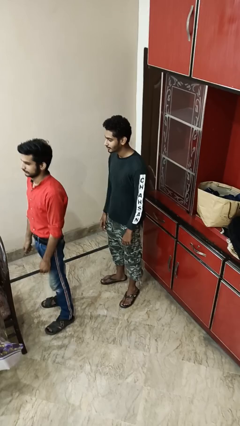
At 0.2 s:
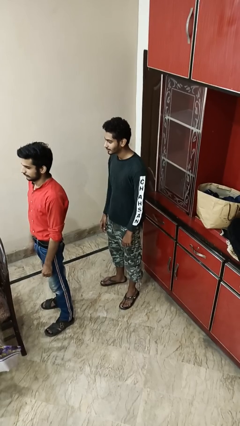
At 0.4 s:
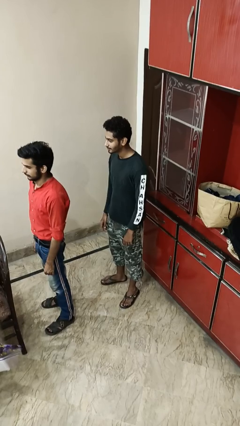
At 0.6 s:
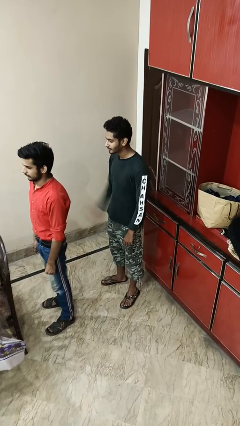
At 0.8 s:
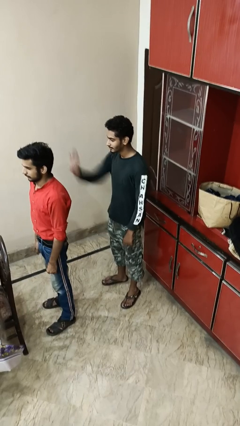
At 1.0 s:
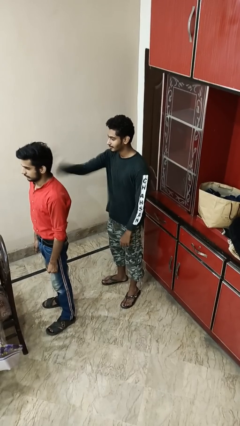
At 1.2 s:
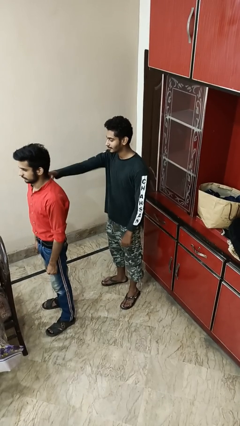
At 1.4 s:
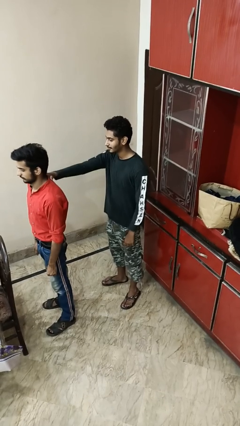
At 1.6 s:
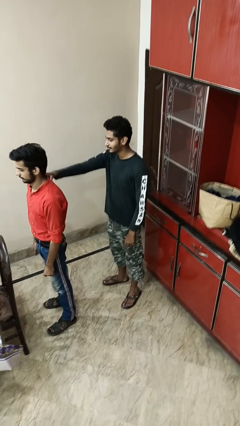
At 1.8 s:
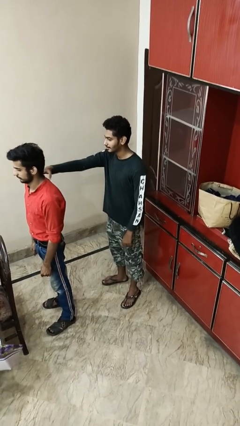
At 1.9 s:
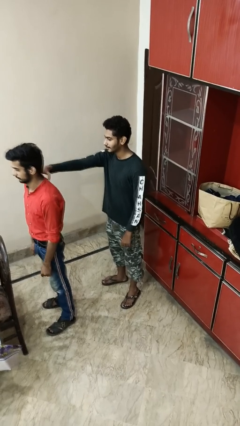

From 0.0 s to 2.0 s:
person grabs person by shoulder

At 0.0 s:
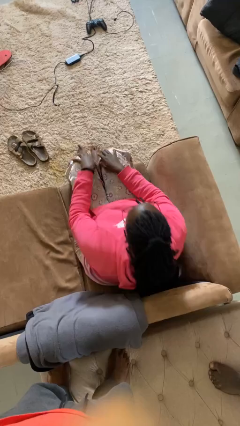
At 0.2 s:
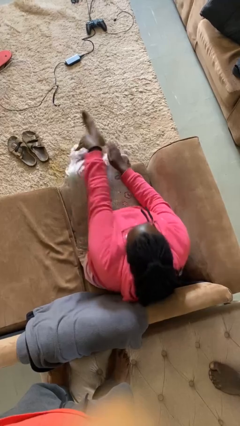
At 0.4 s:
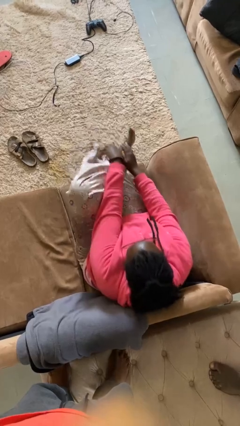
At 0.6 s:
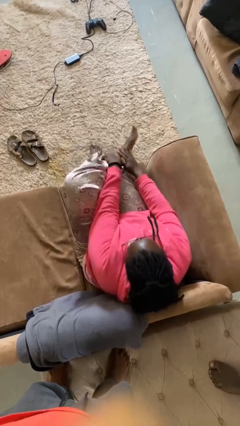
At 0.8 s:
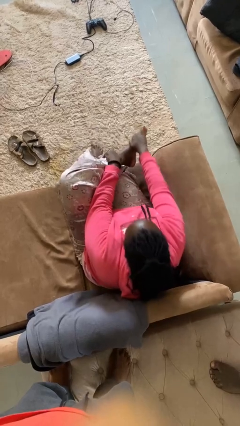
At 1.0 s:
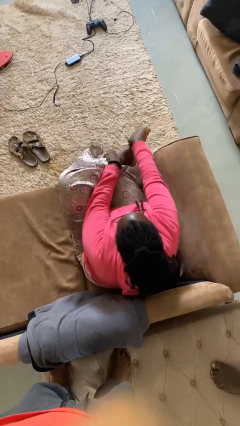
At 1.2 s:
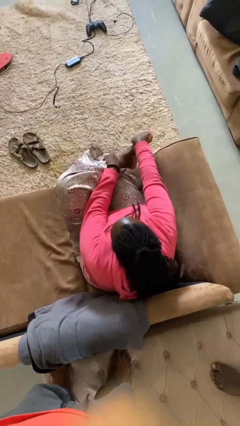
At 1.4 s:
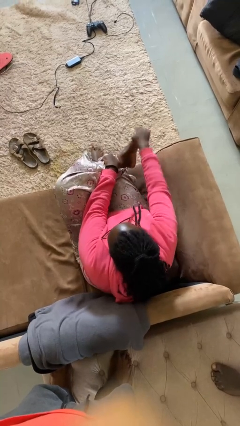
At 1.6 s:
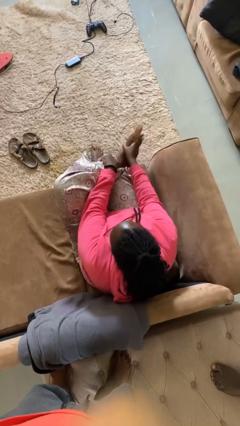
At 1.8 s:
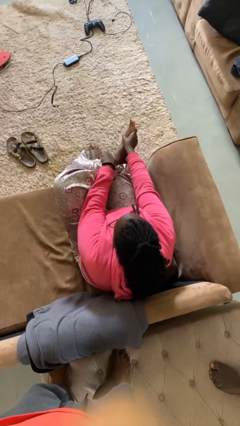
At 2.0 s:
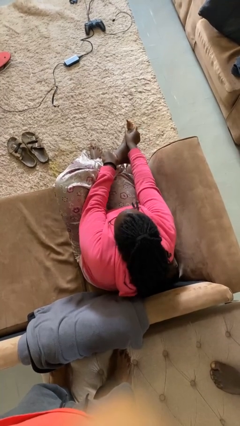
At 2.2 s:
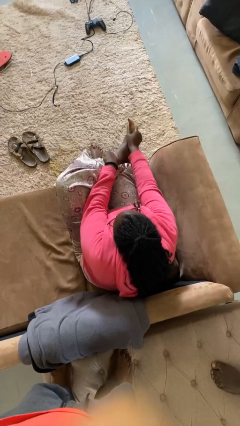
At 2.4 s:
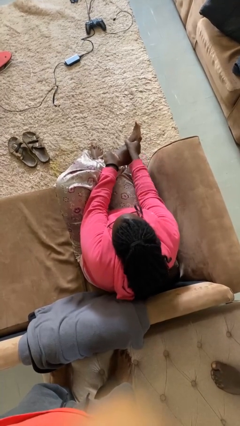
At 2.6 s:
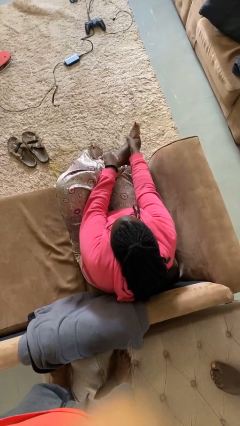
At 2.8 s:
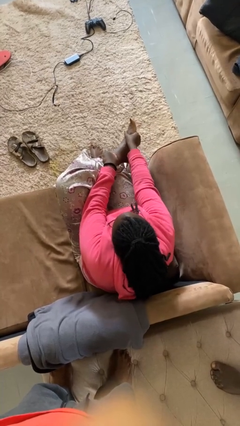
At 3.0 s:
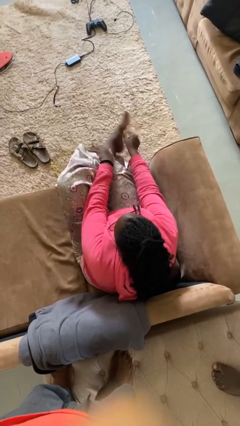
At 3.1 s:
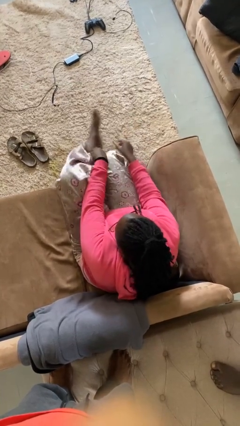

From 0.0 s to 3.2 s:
person rubs foot

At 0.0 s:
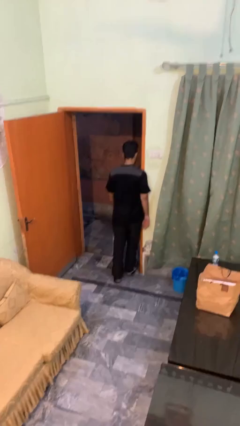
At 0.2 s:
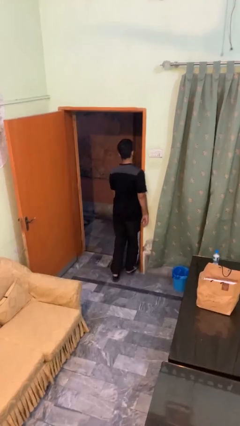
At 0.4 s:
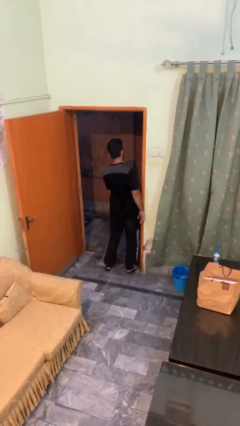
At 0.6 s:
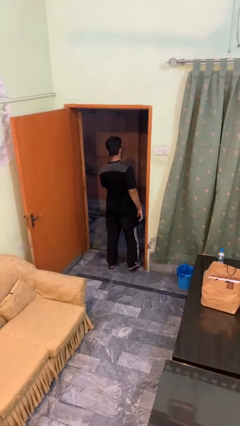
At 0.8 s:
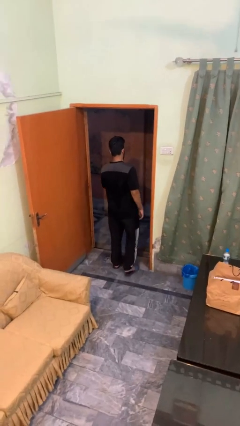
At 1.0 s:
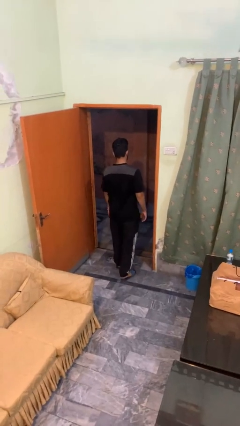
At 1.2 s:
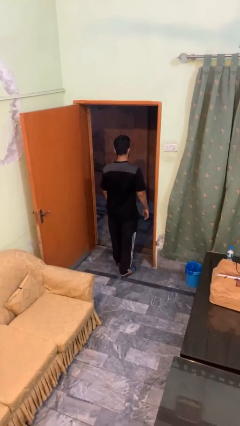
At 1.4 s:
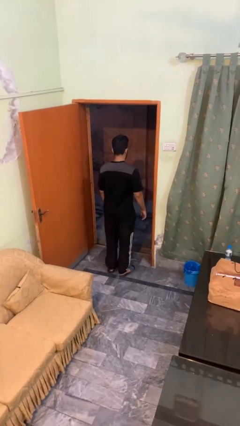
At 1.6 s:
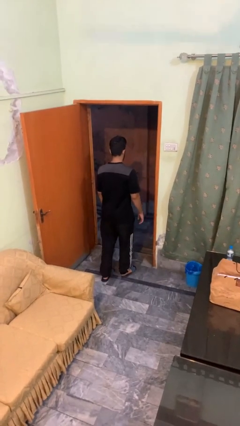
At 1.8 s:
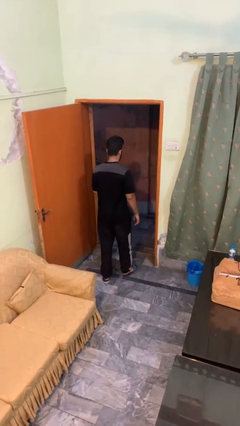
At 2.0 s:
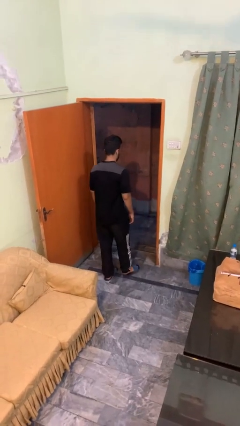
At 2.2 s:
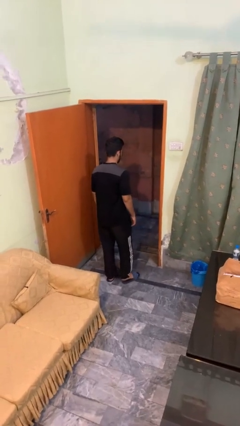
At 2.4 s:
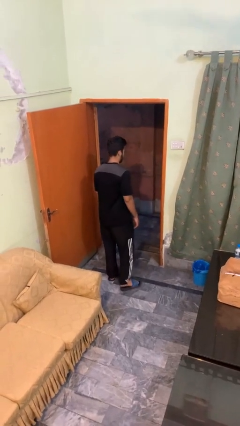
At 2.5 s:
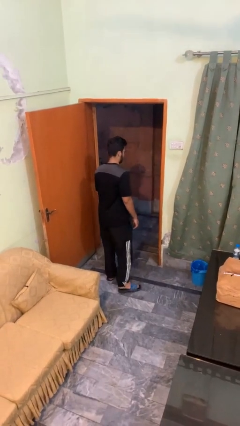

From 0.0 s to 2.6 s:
person bumps into wall

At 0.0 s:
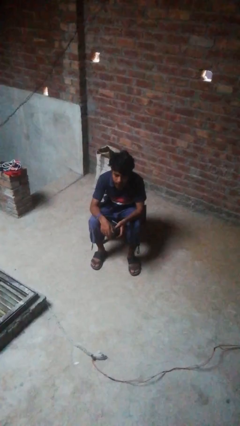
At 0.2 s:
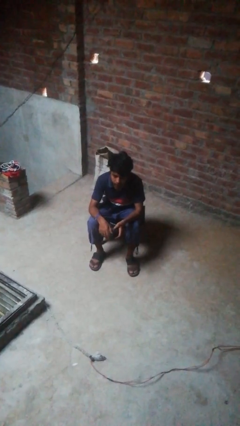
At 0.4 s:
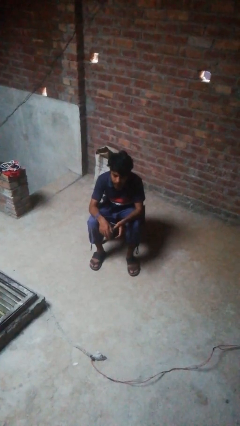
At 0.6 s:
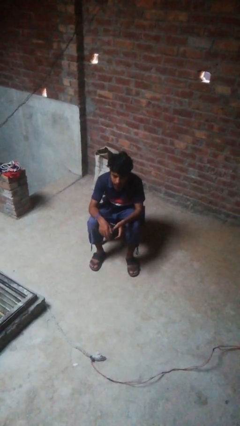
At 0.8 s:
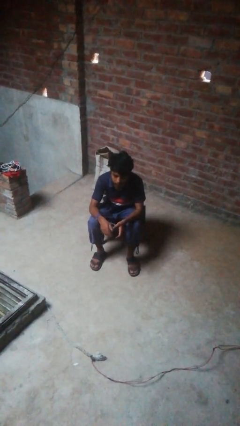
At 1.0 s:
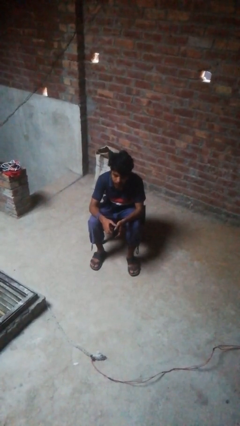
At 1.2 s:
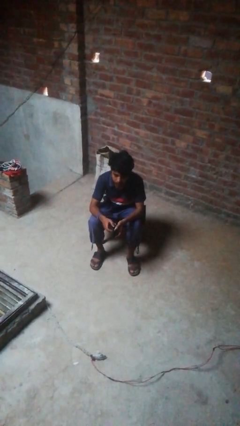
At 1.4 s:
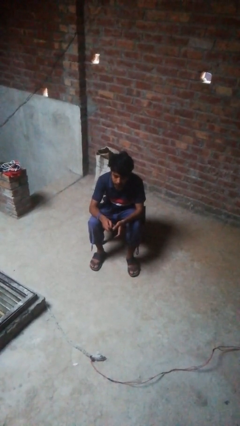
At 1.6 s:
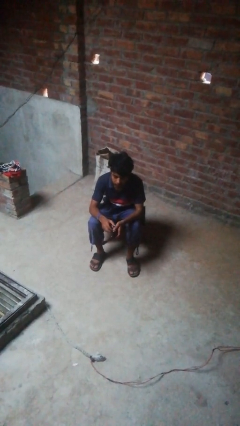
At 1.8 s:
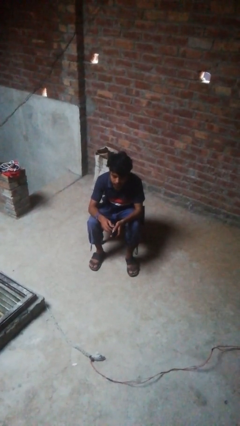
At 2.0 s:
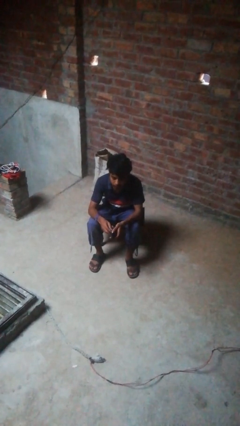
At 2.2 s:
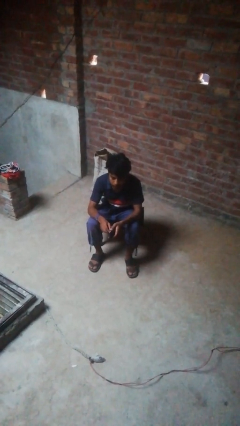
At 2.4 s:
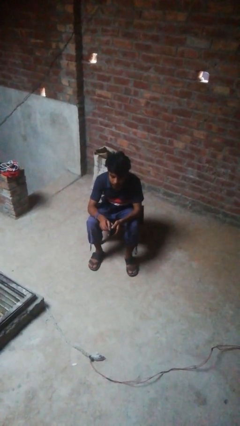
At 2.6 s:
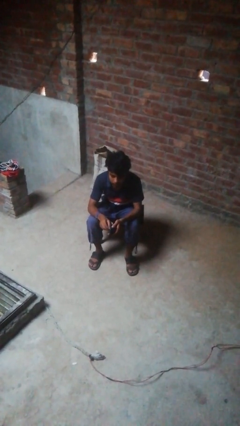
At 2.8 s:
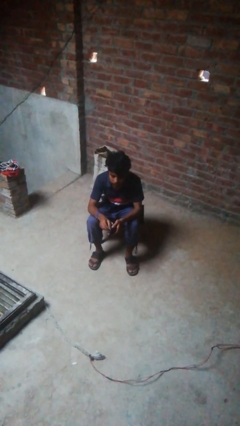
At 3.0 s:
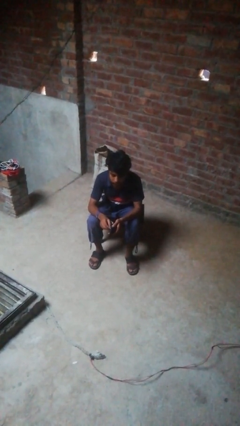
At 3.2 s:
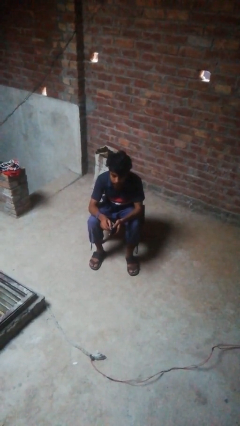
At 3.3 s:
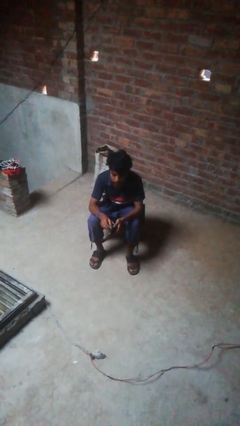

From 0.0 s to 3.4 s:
person searches in purse

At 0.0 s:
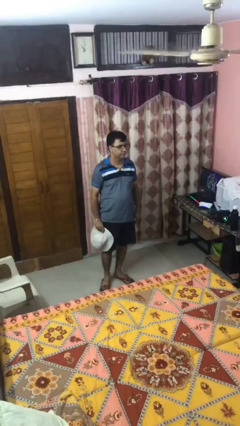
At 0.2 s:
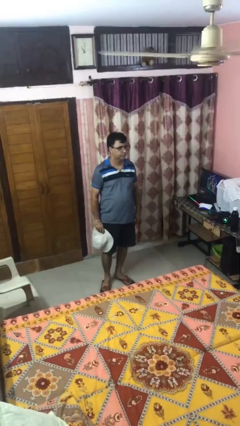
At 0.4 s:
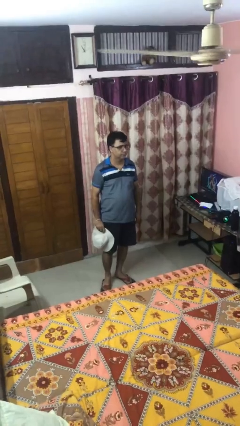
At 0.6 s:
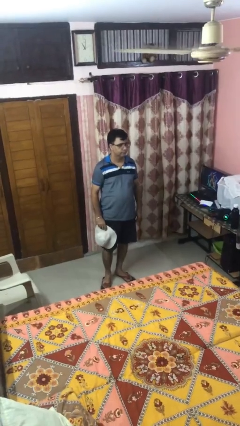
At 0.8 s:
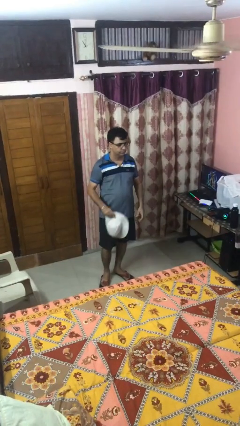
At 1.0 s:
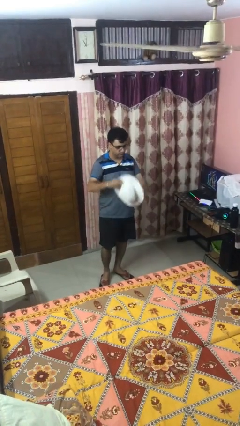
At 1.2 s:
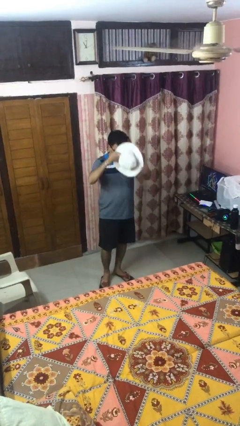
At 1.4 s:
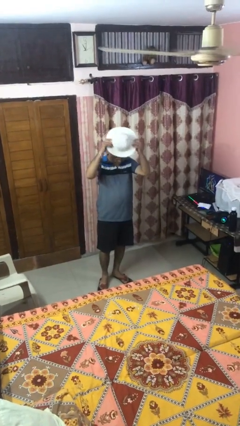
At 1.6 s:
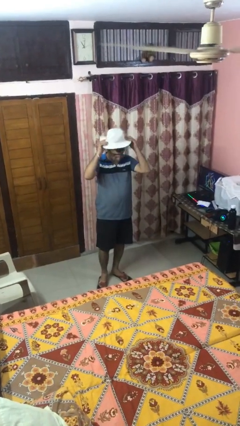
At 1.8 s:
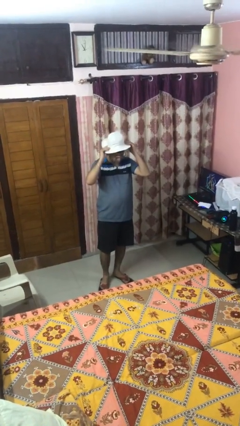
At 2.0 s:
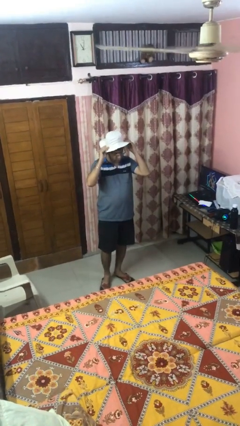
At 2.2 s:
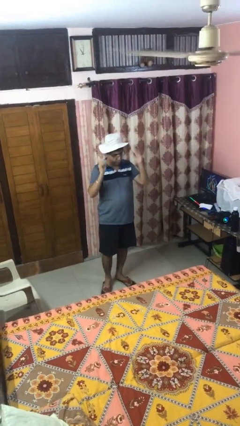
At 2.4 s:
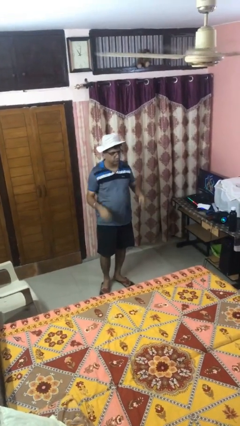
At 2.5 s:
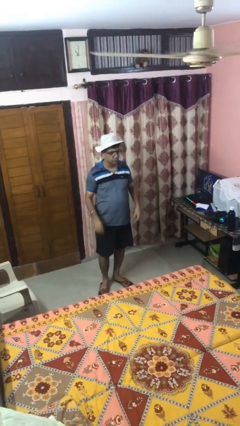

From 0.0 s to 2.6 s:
person puts on hat

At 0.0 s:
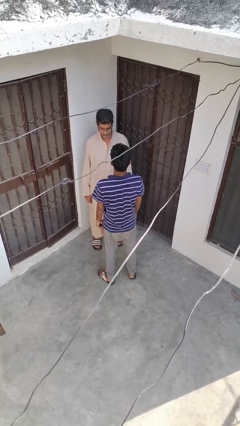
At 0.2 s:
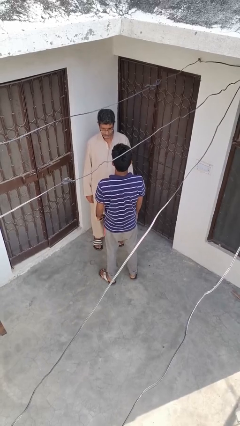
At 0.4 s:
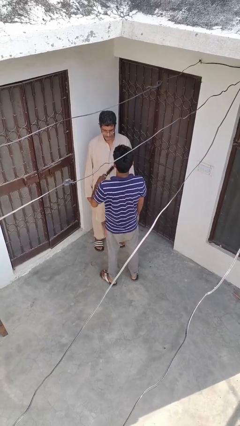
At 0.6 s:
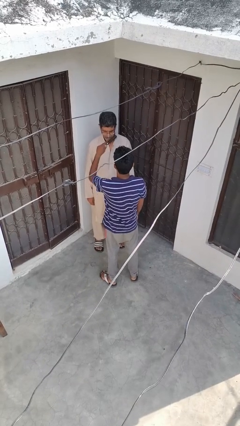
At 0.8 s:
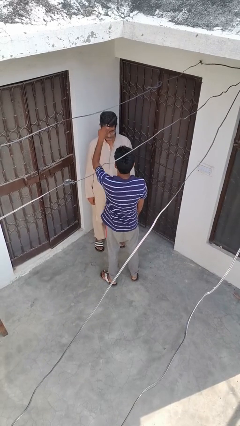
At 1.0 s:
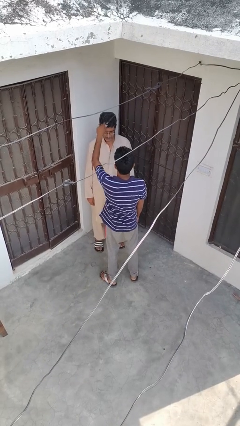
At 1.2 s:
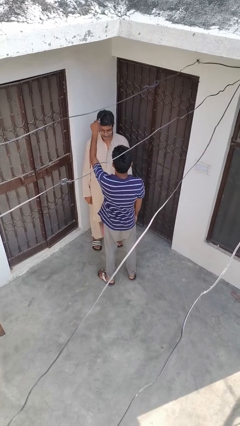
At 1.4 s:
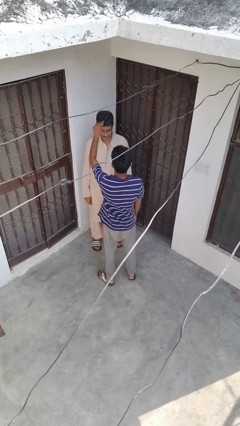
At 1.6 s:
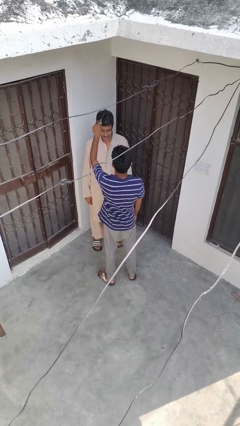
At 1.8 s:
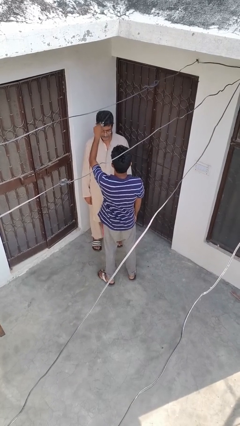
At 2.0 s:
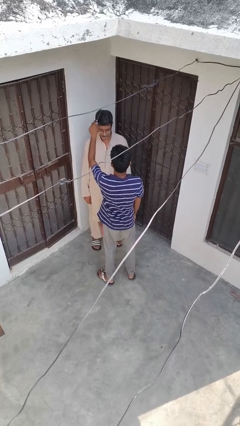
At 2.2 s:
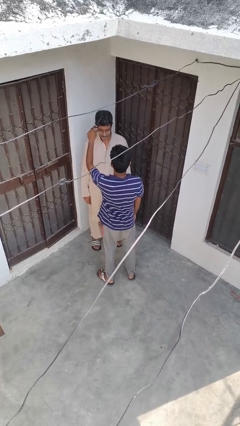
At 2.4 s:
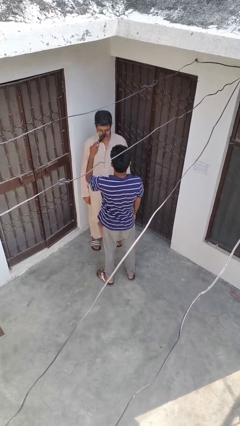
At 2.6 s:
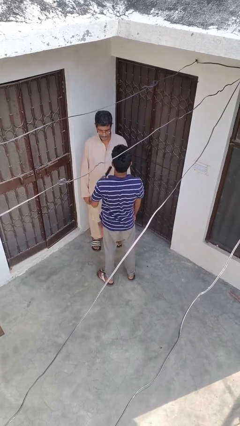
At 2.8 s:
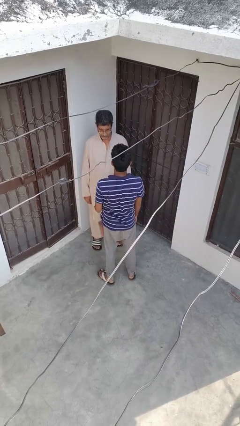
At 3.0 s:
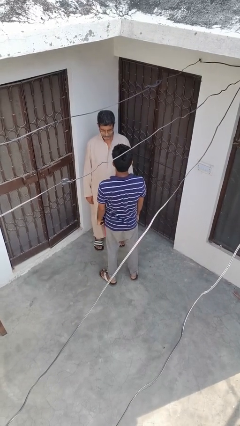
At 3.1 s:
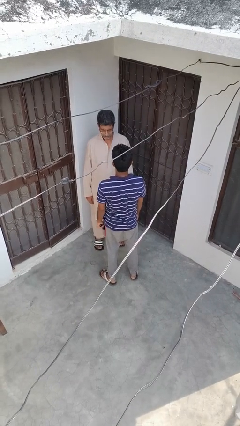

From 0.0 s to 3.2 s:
person brushes hair of person

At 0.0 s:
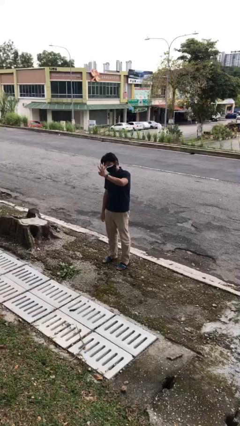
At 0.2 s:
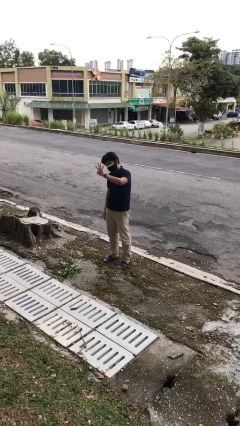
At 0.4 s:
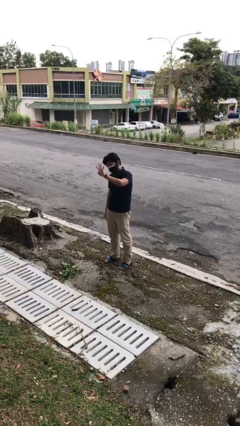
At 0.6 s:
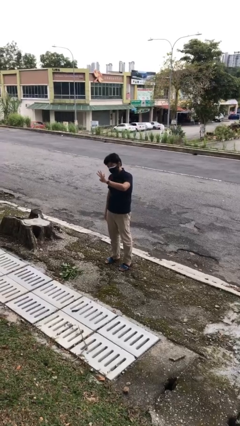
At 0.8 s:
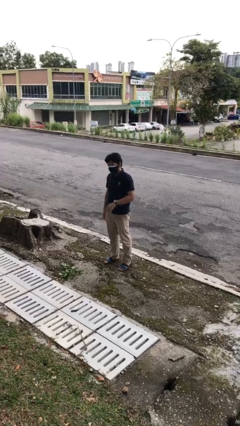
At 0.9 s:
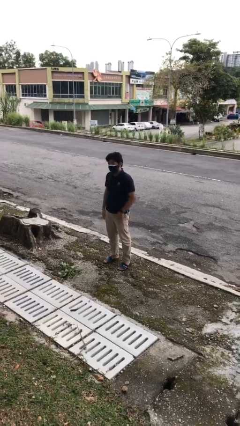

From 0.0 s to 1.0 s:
person gestures number four
